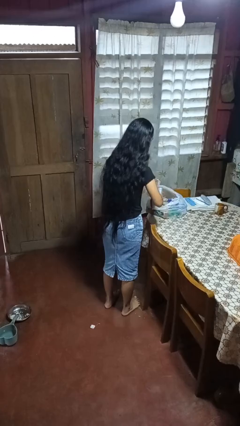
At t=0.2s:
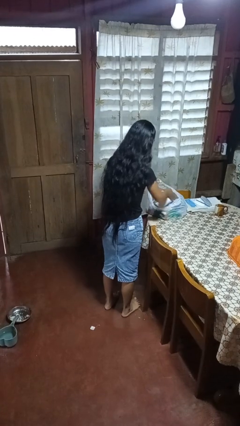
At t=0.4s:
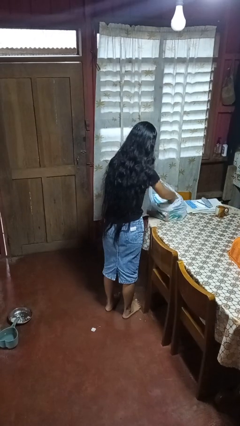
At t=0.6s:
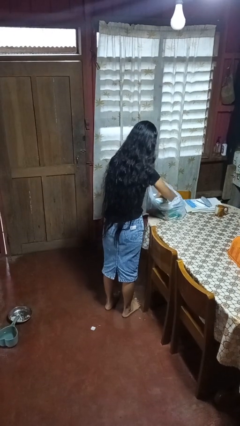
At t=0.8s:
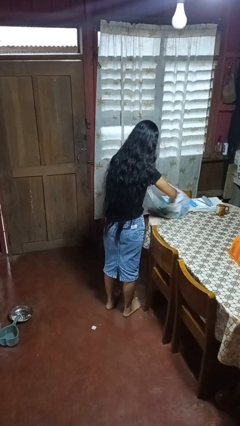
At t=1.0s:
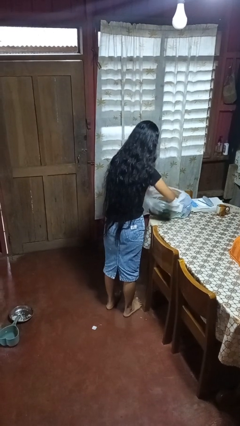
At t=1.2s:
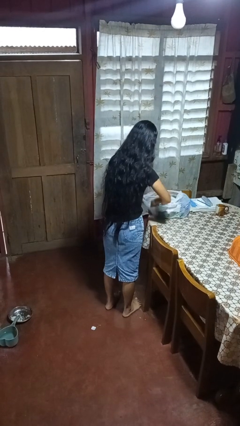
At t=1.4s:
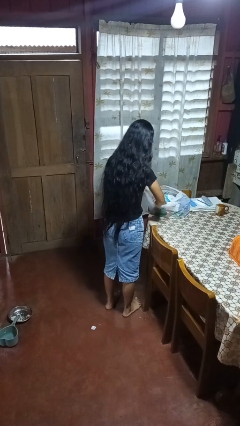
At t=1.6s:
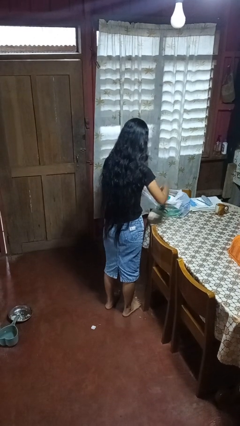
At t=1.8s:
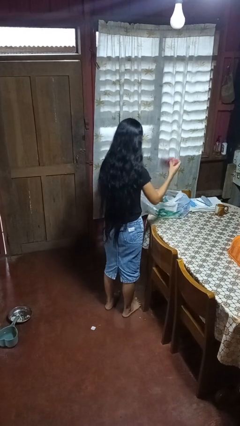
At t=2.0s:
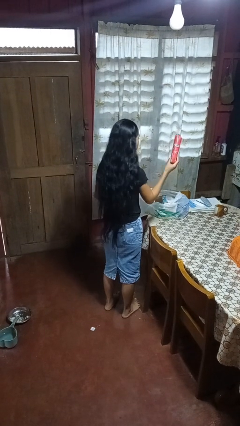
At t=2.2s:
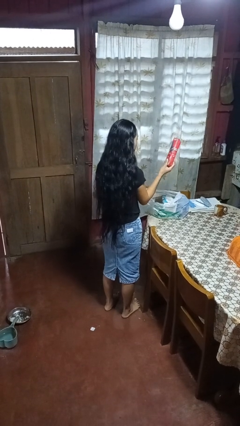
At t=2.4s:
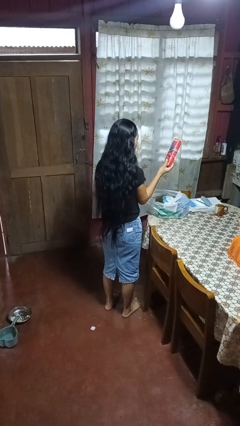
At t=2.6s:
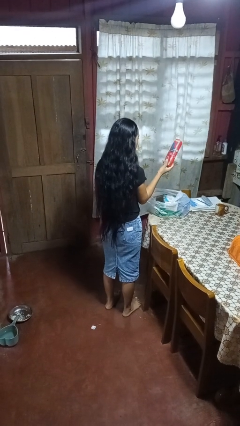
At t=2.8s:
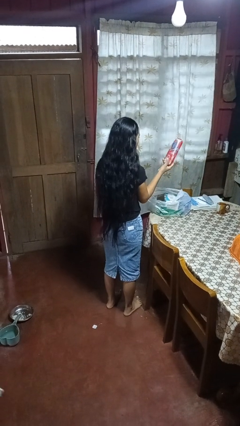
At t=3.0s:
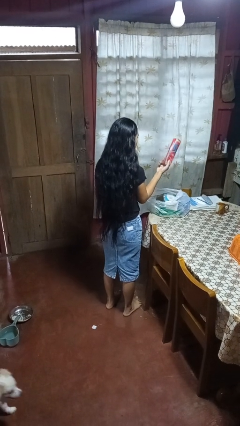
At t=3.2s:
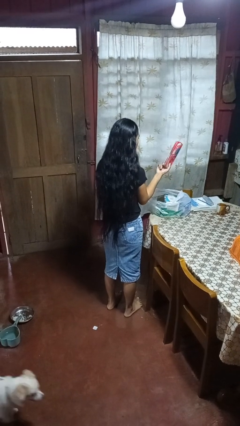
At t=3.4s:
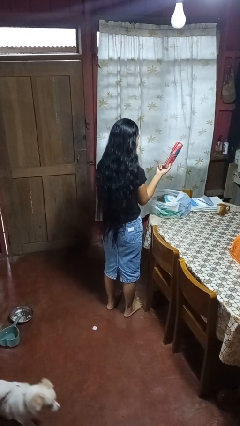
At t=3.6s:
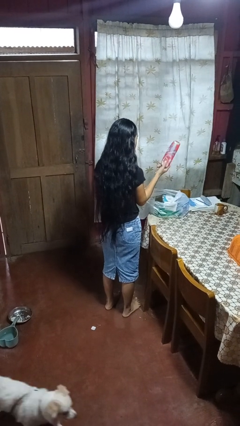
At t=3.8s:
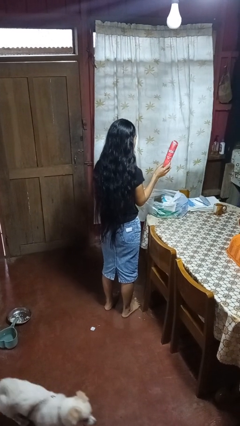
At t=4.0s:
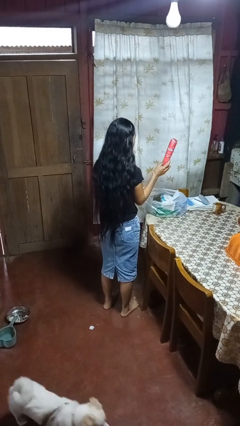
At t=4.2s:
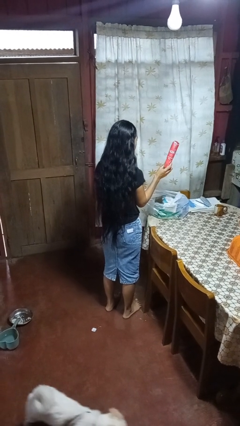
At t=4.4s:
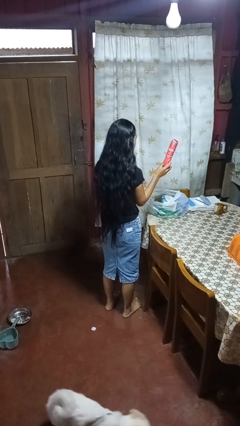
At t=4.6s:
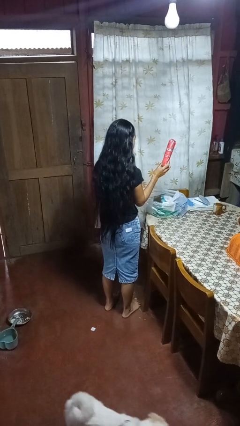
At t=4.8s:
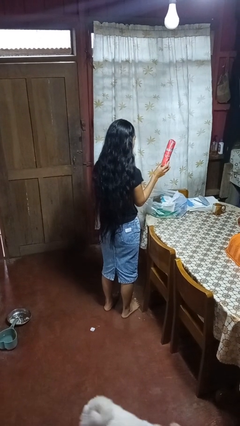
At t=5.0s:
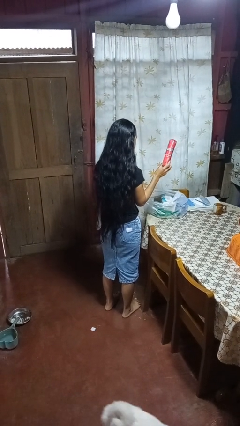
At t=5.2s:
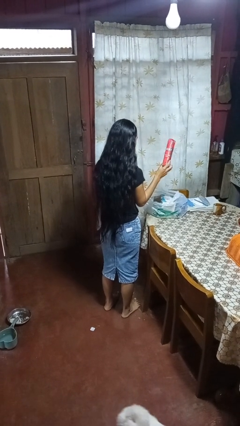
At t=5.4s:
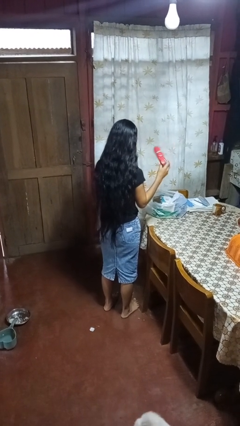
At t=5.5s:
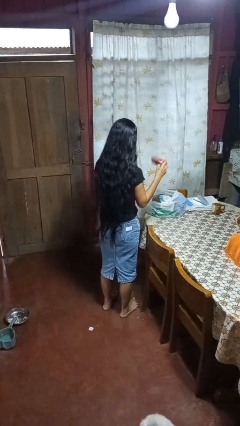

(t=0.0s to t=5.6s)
person takes object from bag

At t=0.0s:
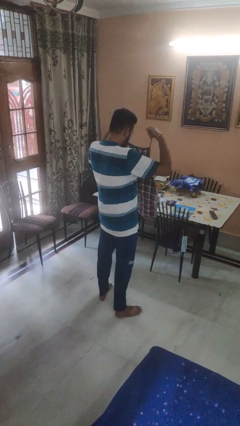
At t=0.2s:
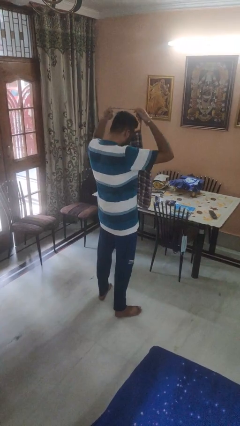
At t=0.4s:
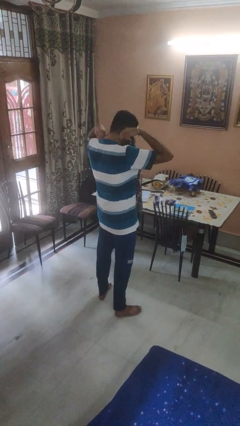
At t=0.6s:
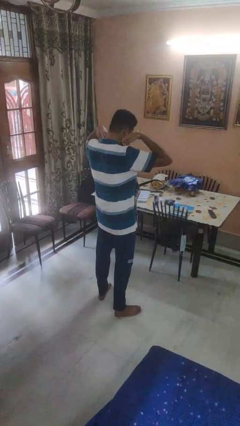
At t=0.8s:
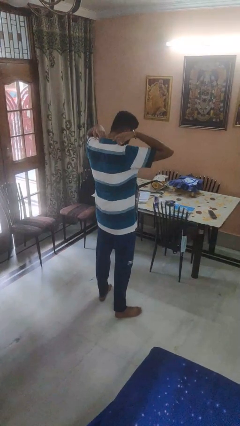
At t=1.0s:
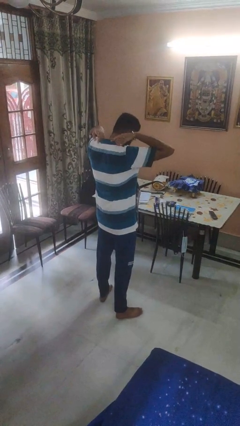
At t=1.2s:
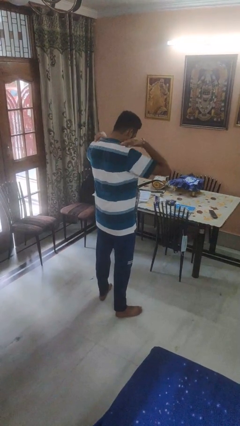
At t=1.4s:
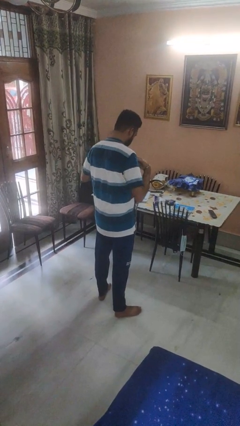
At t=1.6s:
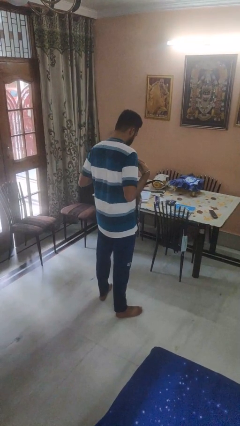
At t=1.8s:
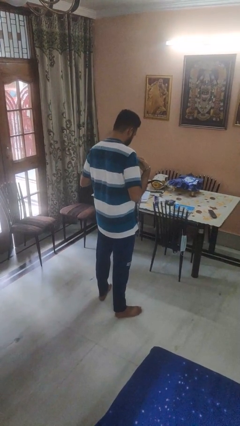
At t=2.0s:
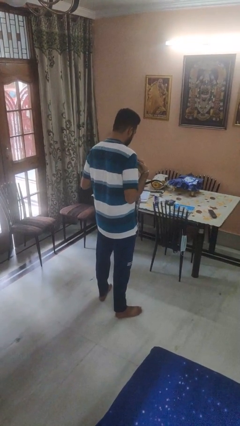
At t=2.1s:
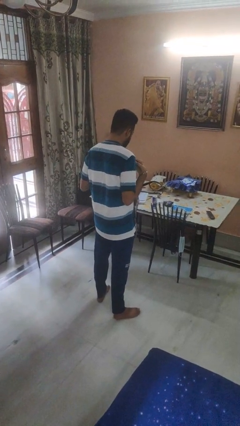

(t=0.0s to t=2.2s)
person puts on apron

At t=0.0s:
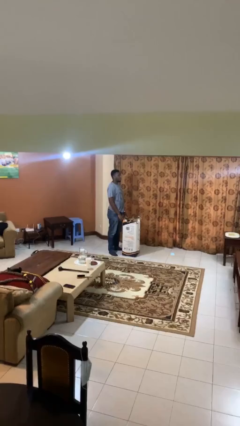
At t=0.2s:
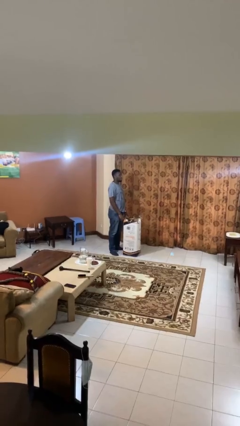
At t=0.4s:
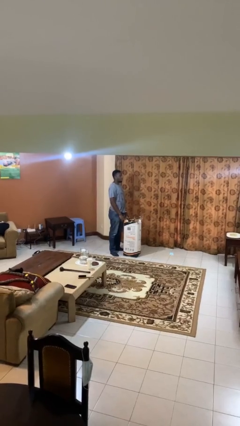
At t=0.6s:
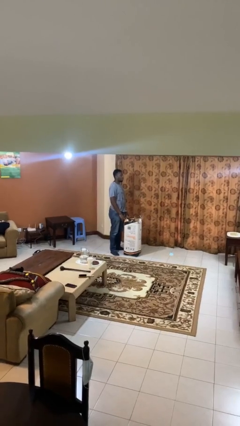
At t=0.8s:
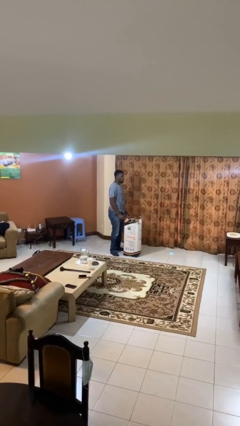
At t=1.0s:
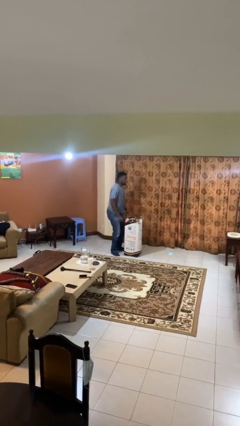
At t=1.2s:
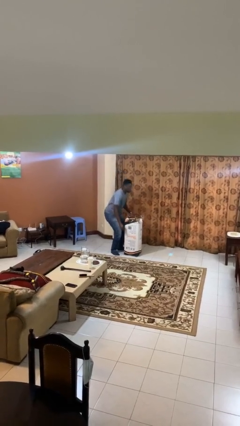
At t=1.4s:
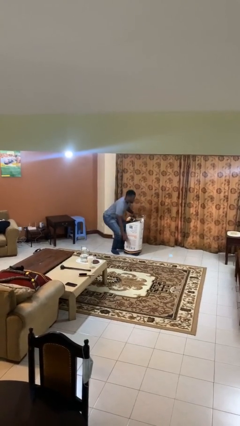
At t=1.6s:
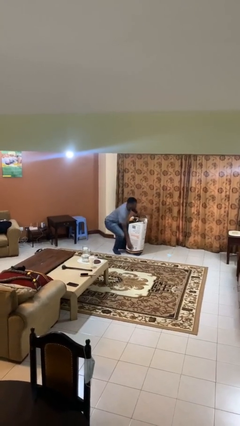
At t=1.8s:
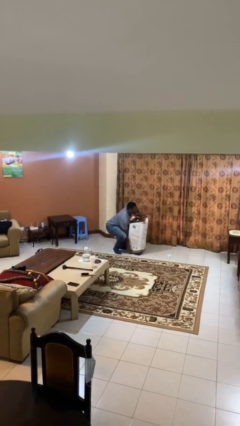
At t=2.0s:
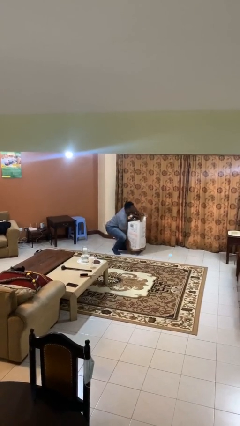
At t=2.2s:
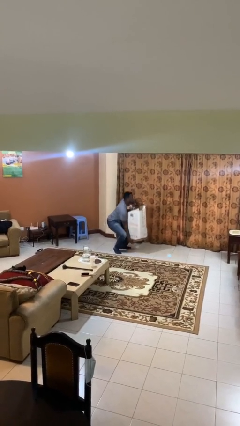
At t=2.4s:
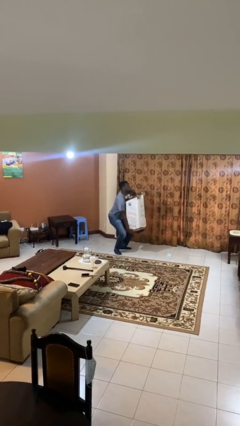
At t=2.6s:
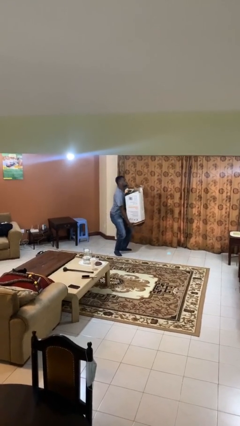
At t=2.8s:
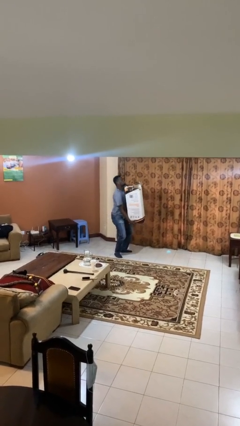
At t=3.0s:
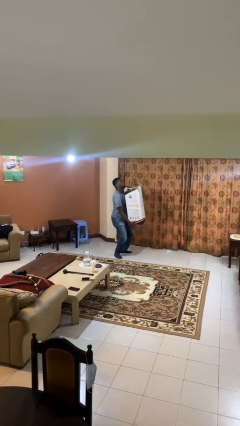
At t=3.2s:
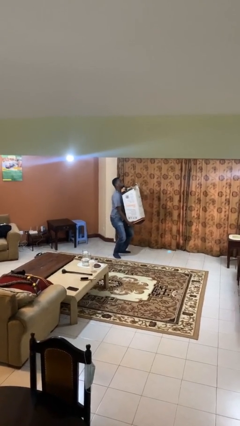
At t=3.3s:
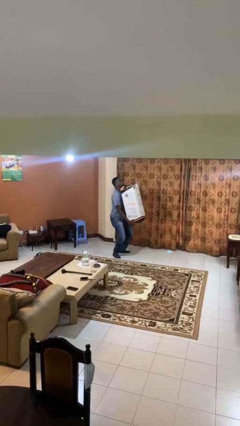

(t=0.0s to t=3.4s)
person picks up object from floor

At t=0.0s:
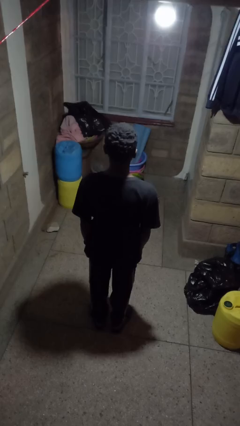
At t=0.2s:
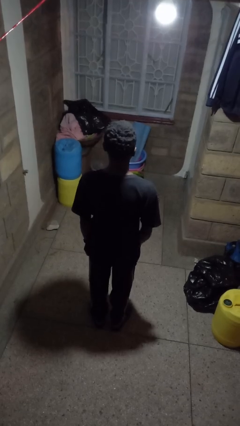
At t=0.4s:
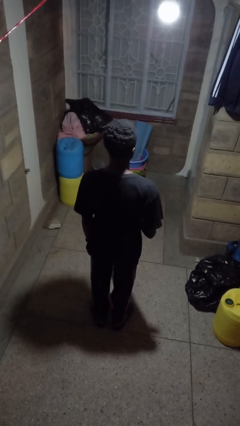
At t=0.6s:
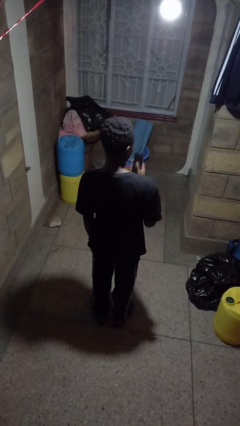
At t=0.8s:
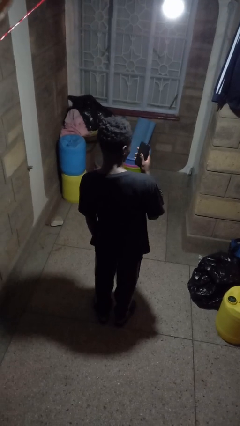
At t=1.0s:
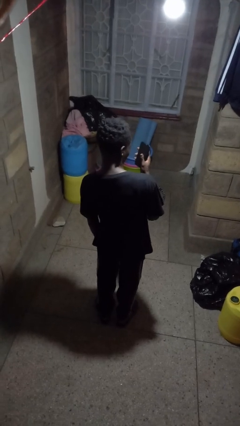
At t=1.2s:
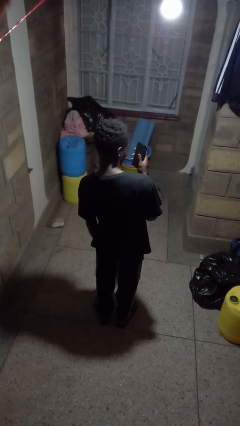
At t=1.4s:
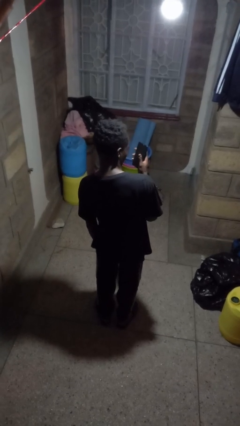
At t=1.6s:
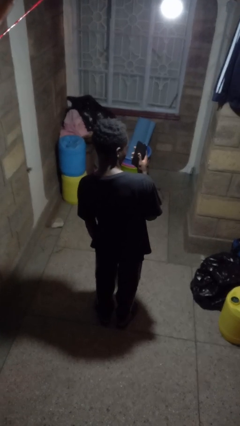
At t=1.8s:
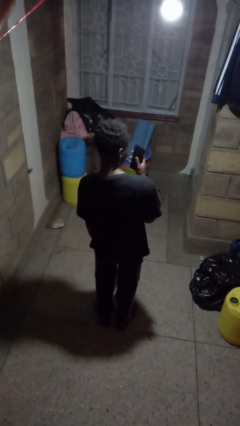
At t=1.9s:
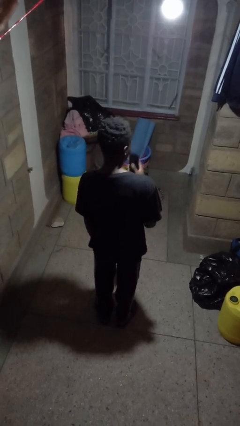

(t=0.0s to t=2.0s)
person takes selfie

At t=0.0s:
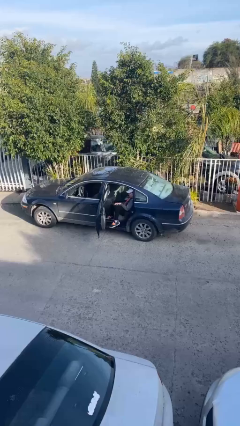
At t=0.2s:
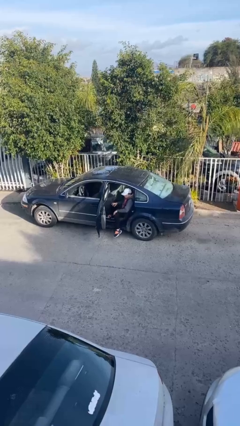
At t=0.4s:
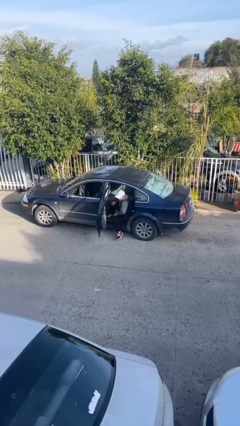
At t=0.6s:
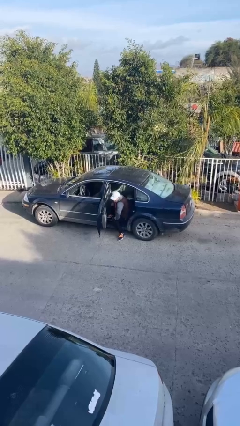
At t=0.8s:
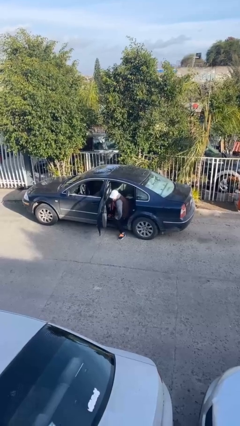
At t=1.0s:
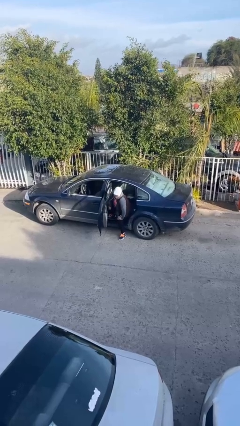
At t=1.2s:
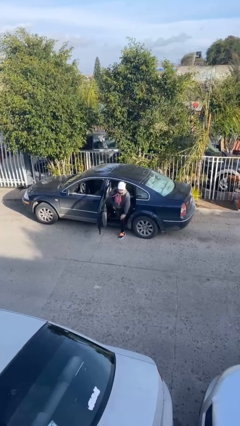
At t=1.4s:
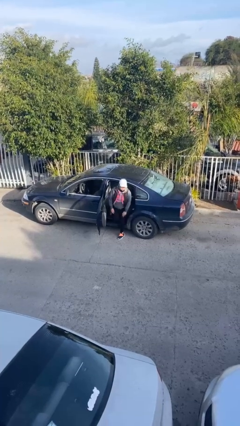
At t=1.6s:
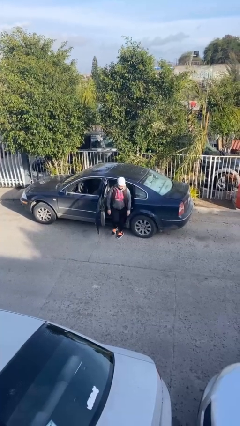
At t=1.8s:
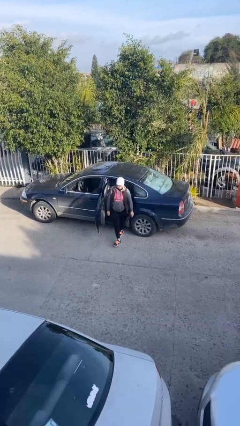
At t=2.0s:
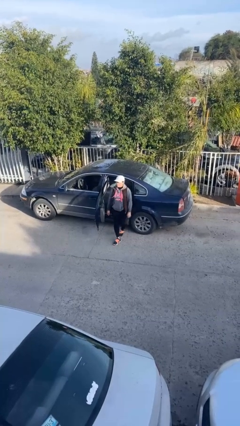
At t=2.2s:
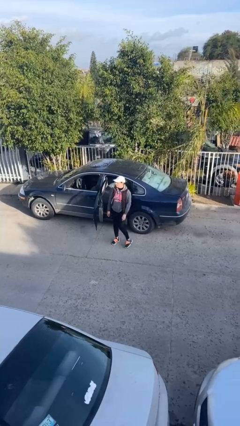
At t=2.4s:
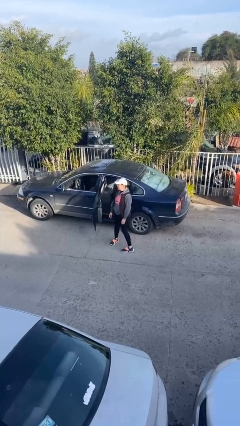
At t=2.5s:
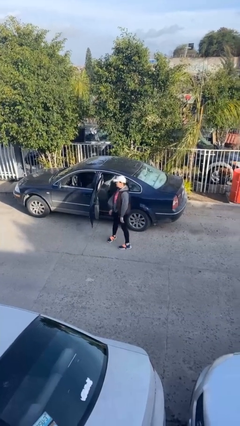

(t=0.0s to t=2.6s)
person exits car

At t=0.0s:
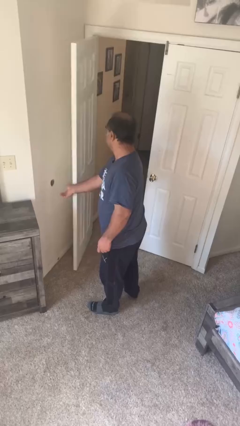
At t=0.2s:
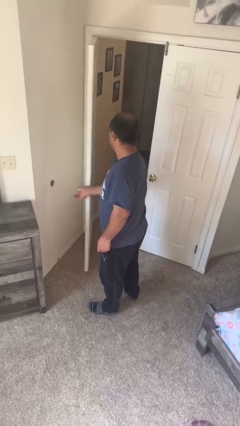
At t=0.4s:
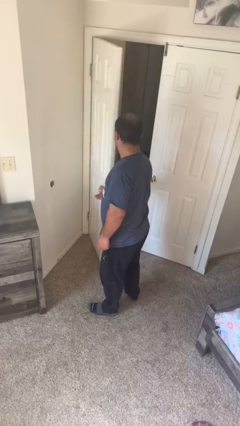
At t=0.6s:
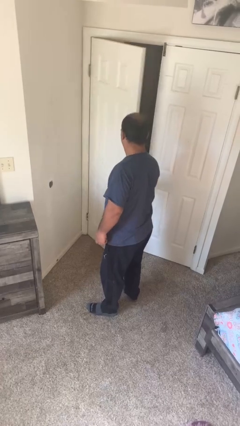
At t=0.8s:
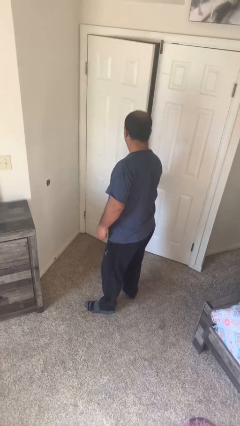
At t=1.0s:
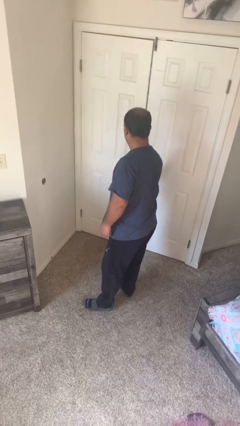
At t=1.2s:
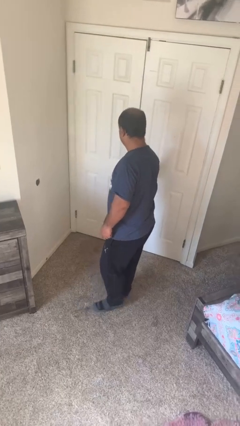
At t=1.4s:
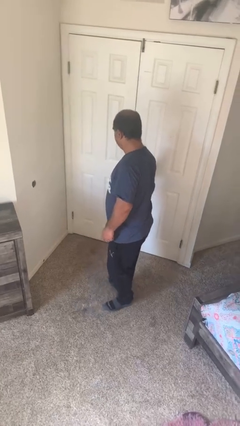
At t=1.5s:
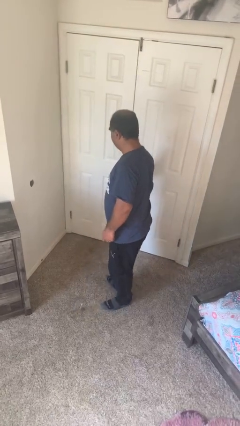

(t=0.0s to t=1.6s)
person closes facility door
